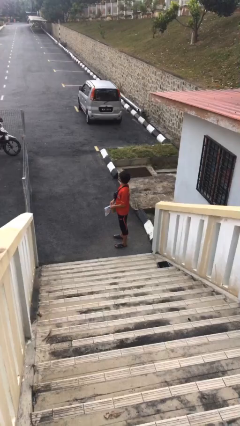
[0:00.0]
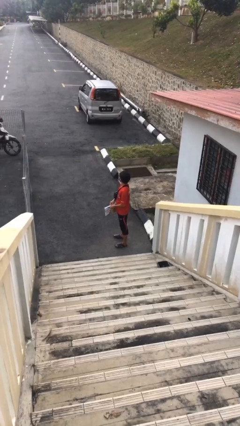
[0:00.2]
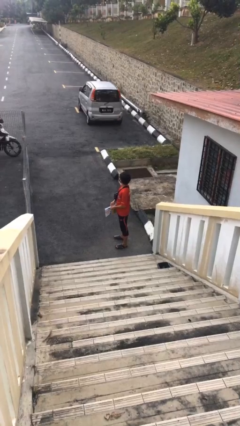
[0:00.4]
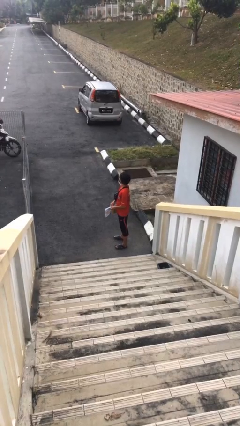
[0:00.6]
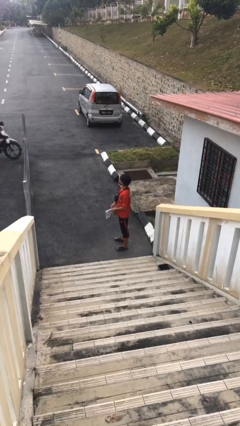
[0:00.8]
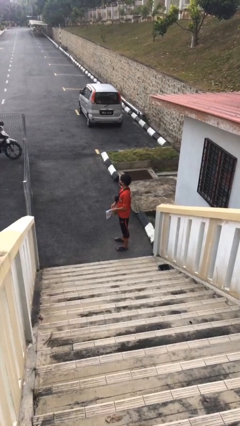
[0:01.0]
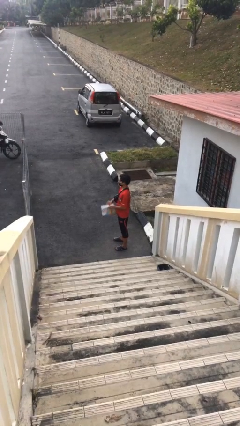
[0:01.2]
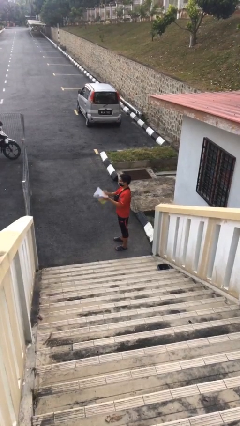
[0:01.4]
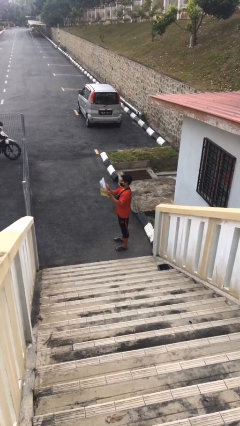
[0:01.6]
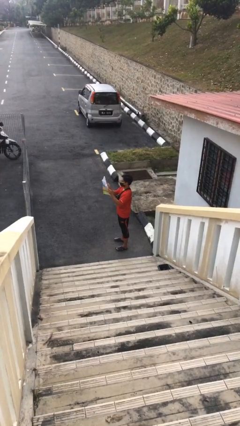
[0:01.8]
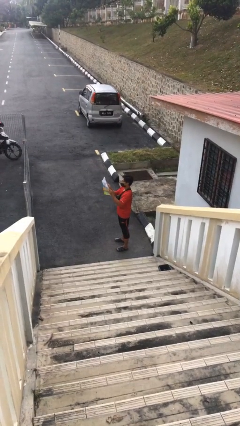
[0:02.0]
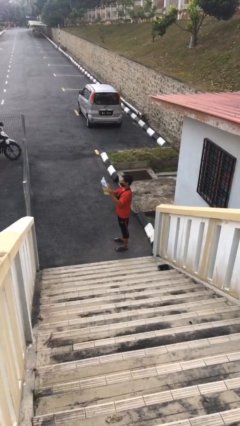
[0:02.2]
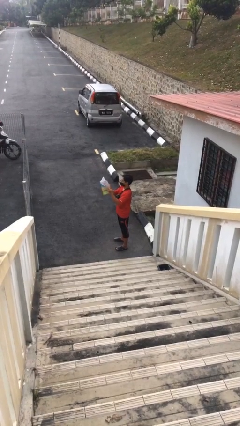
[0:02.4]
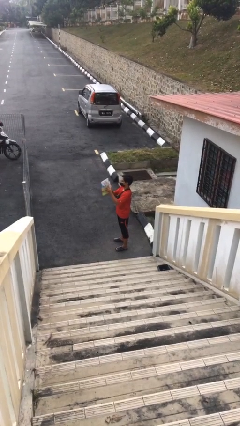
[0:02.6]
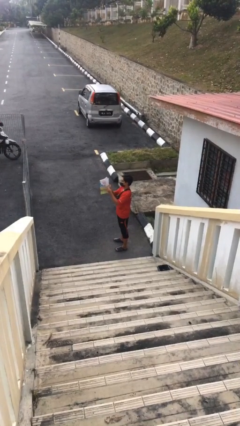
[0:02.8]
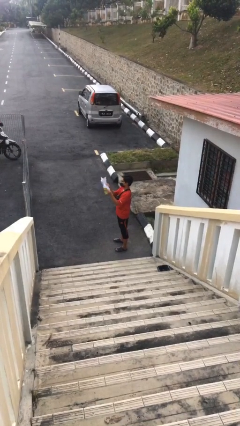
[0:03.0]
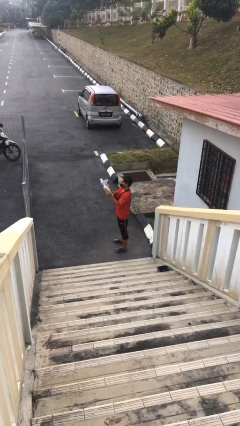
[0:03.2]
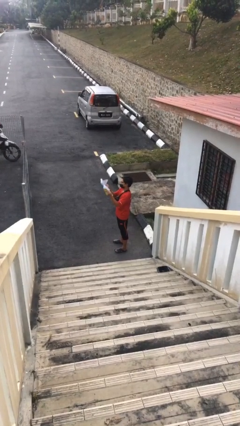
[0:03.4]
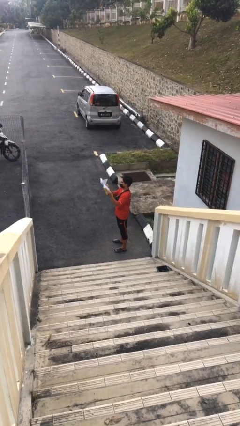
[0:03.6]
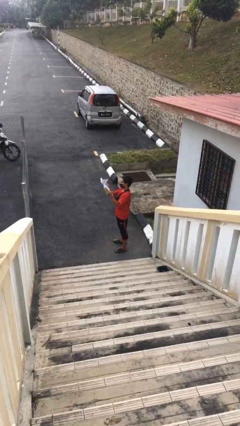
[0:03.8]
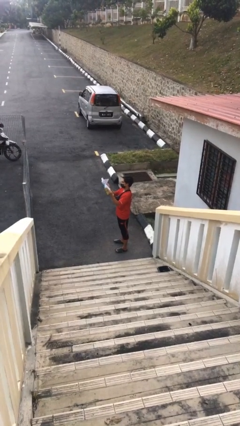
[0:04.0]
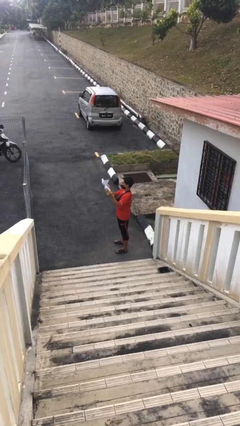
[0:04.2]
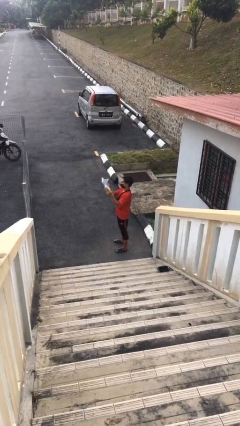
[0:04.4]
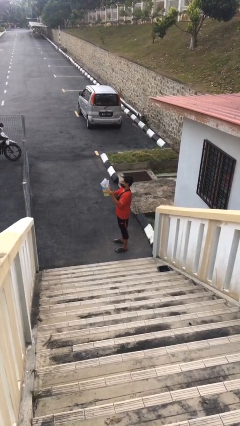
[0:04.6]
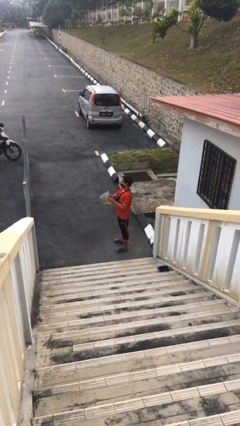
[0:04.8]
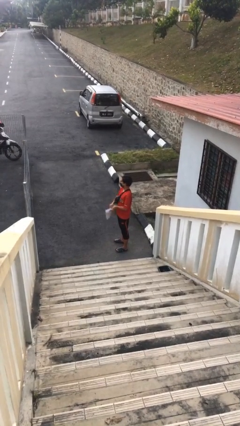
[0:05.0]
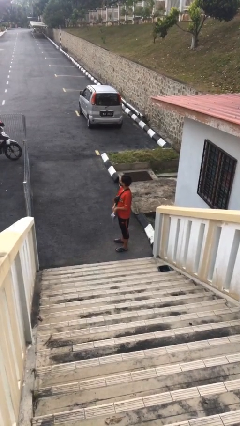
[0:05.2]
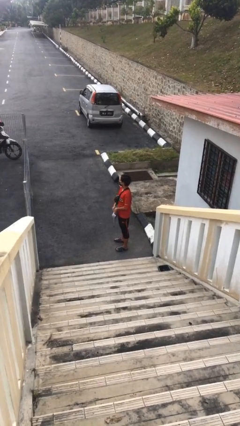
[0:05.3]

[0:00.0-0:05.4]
person reads document

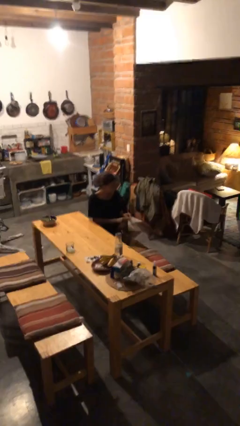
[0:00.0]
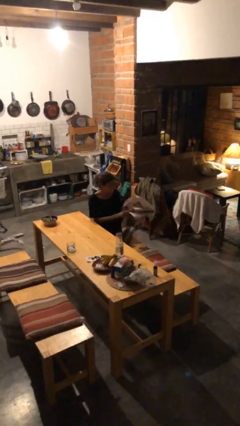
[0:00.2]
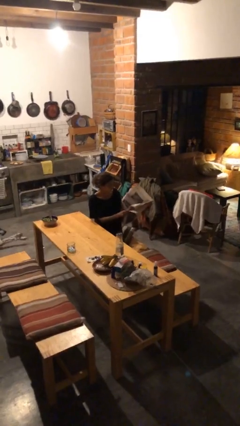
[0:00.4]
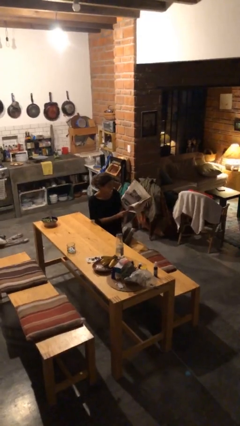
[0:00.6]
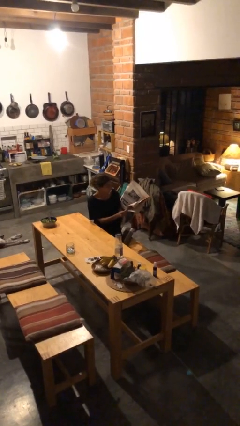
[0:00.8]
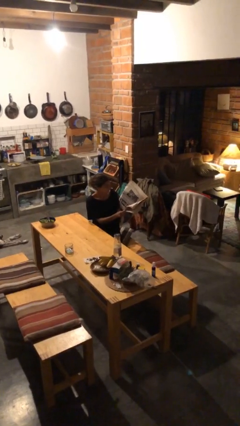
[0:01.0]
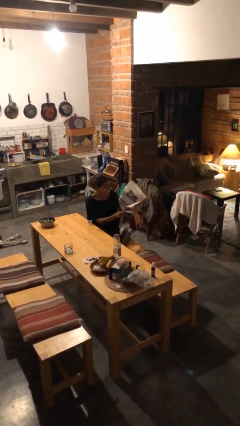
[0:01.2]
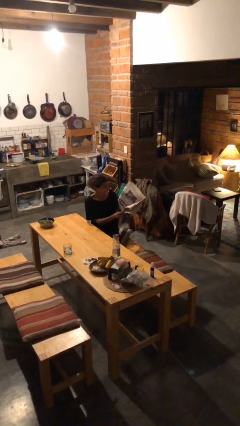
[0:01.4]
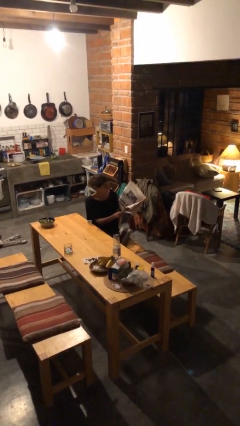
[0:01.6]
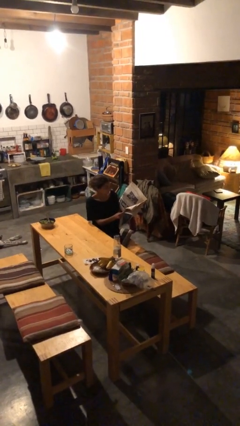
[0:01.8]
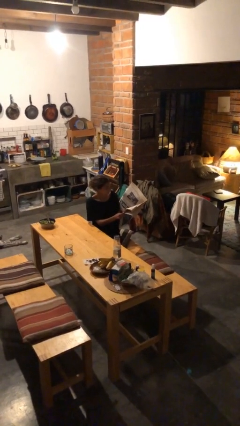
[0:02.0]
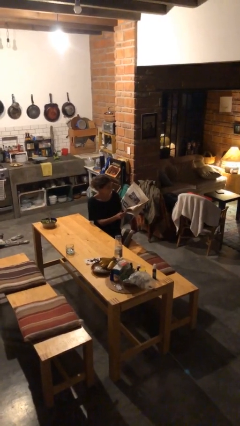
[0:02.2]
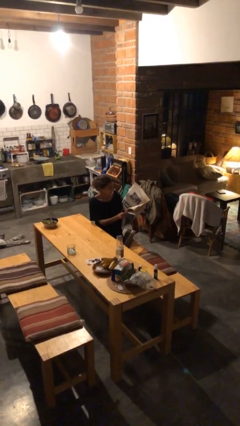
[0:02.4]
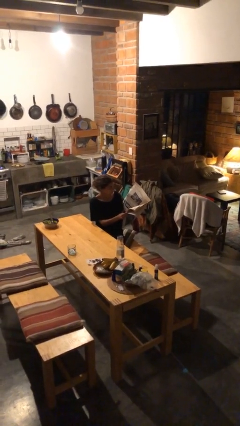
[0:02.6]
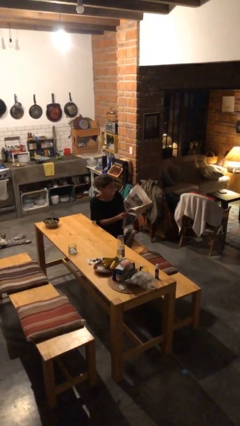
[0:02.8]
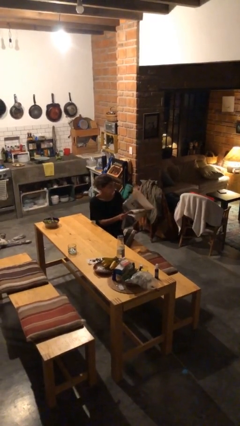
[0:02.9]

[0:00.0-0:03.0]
person reads newspaper

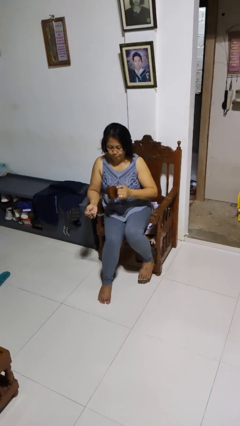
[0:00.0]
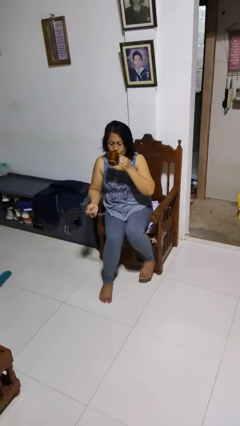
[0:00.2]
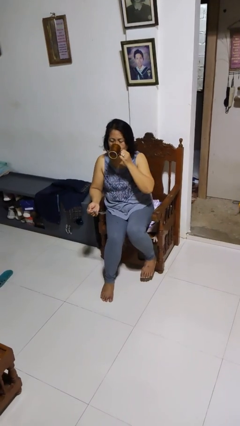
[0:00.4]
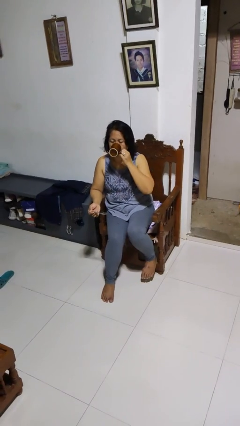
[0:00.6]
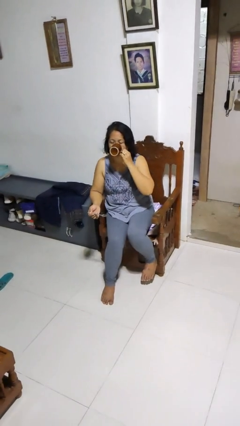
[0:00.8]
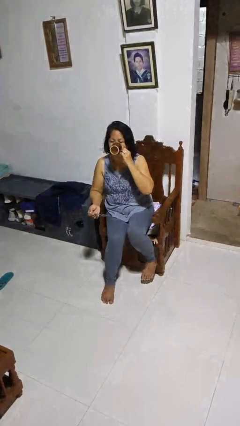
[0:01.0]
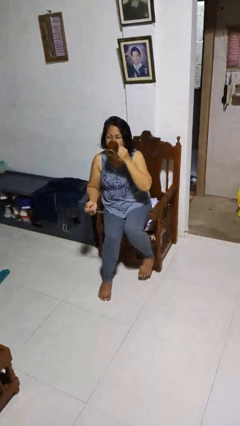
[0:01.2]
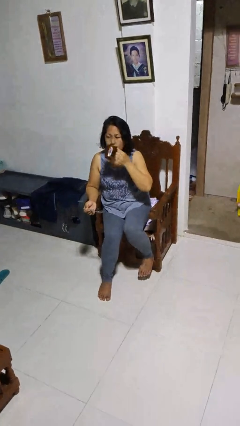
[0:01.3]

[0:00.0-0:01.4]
person drinks from mug

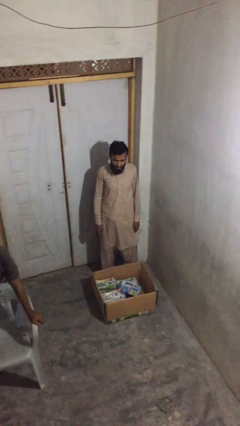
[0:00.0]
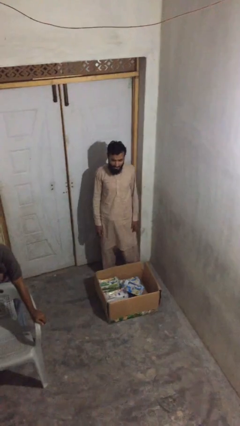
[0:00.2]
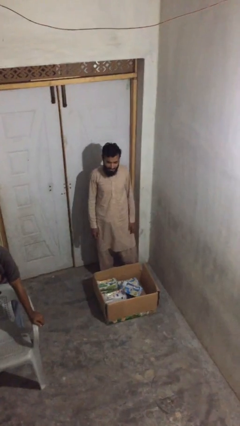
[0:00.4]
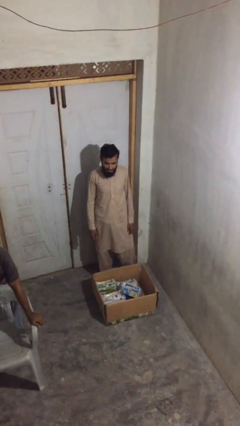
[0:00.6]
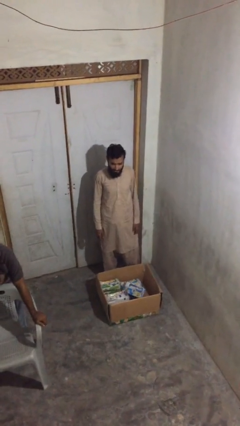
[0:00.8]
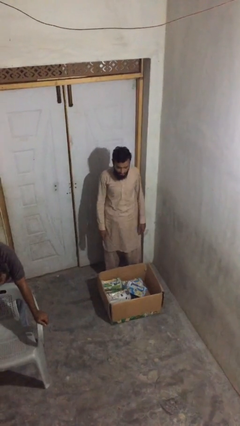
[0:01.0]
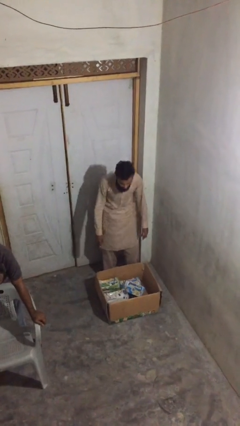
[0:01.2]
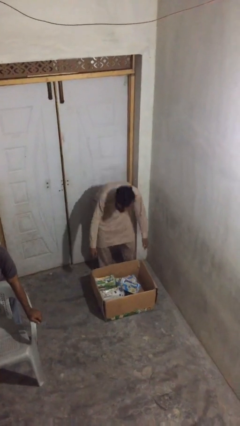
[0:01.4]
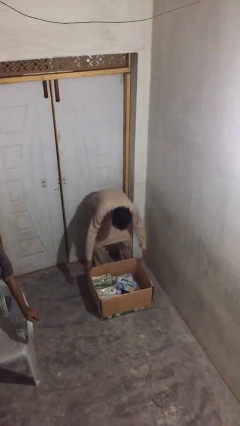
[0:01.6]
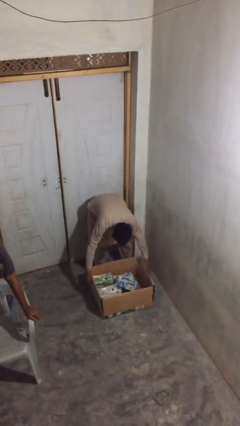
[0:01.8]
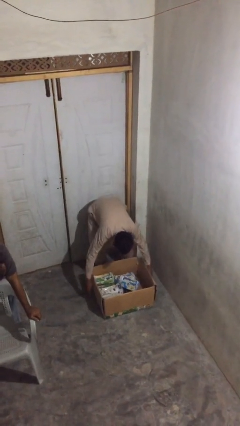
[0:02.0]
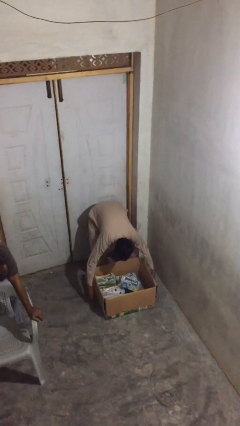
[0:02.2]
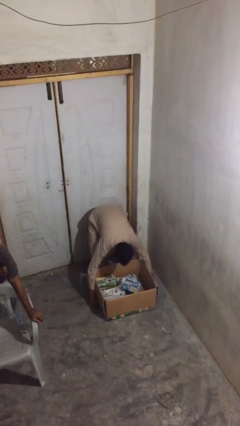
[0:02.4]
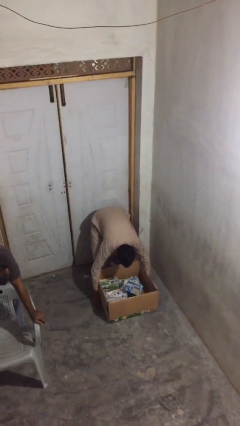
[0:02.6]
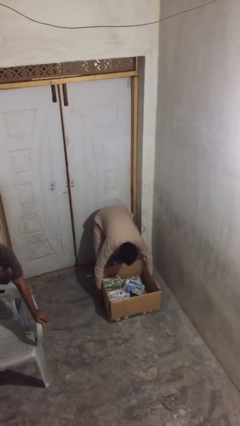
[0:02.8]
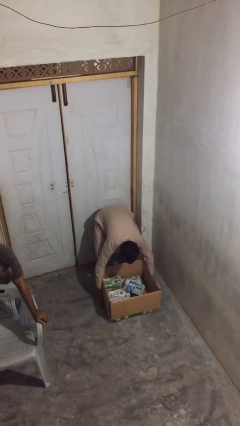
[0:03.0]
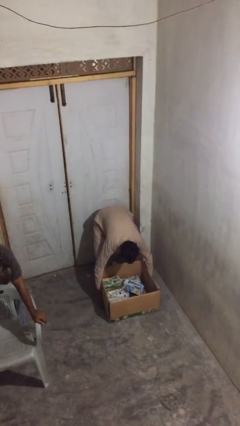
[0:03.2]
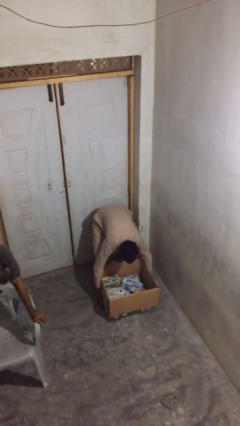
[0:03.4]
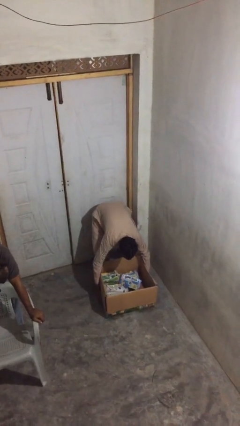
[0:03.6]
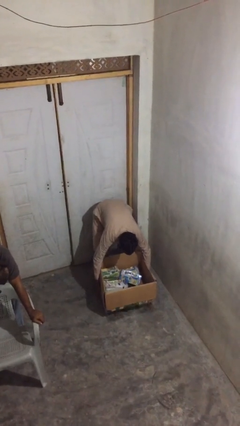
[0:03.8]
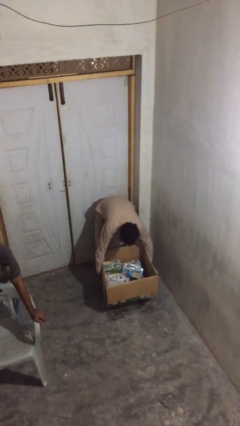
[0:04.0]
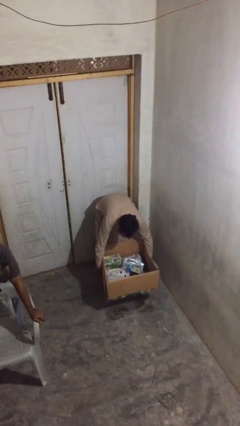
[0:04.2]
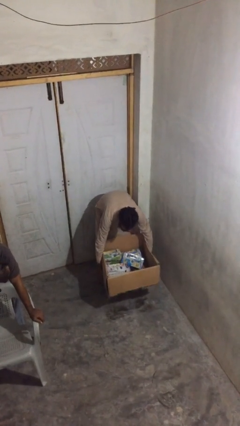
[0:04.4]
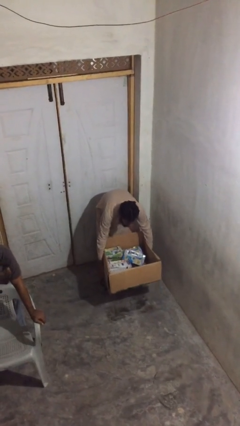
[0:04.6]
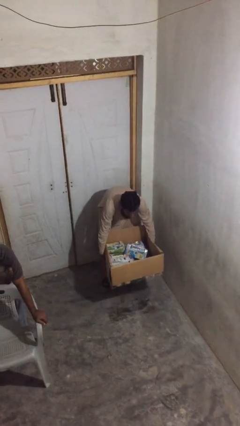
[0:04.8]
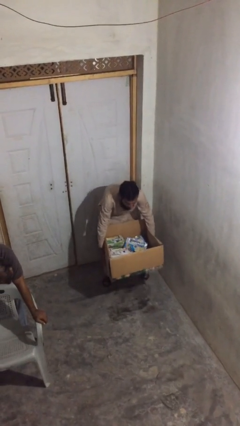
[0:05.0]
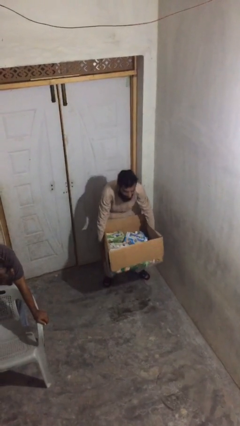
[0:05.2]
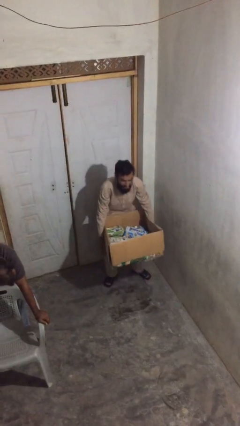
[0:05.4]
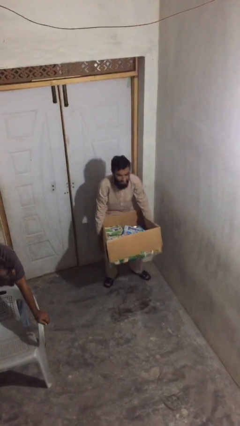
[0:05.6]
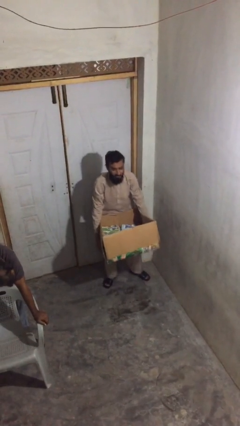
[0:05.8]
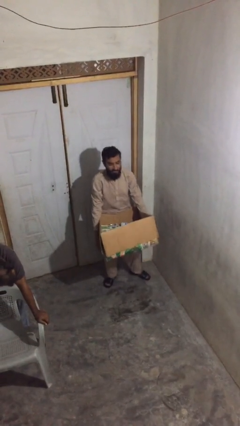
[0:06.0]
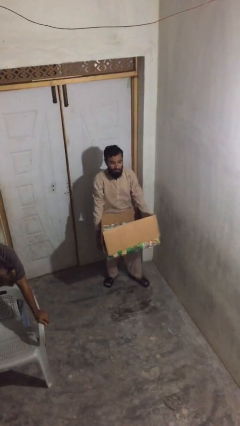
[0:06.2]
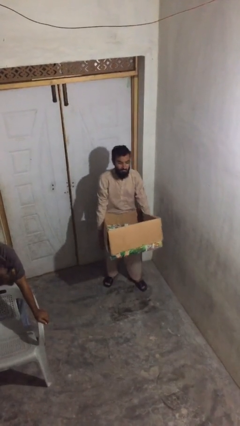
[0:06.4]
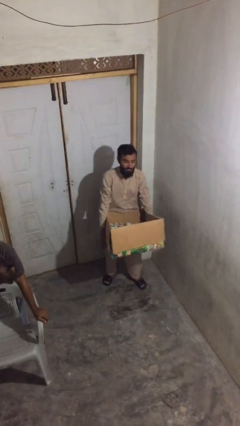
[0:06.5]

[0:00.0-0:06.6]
person picks up object from floor

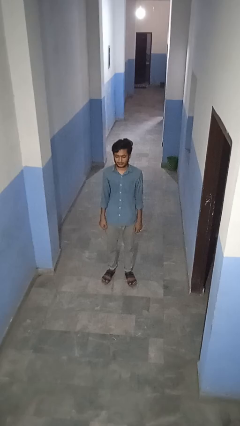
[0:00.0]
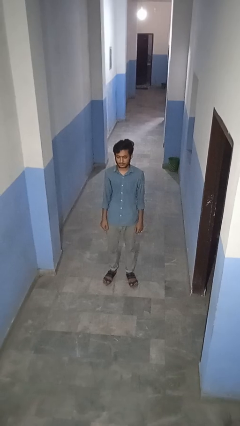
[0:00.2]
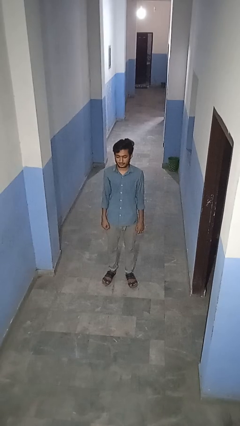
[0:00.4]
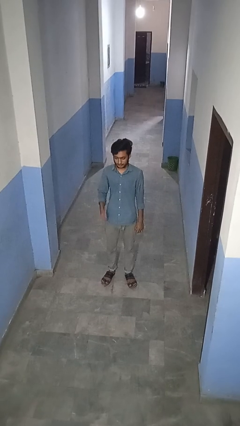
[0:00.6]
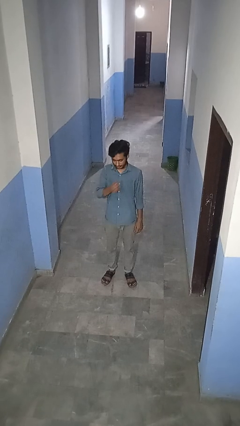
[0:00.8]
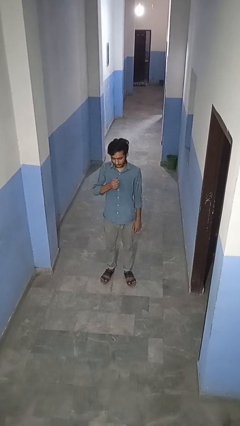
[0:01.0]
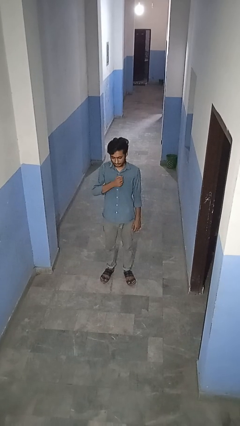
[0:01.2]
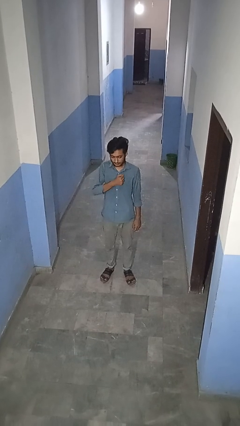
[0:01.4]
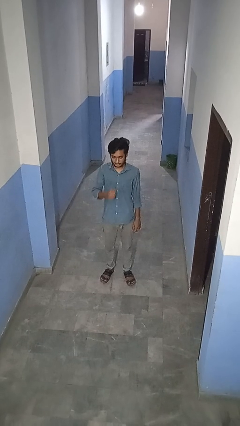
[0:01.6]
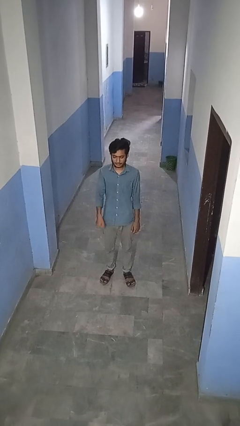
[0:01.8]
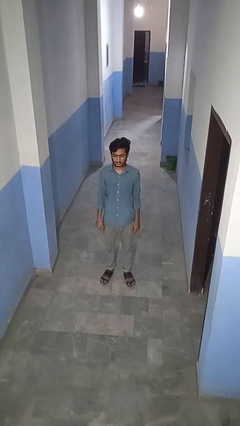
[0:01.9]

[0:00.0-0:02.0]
person drums on chest
